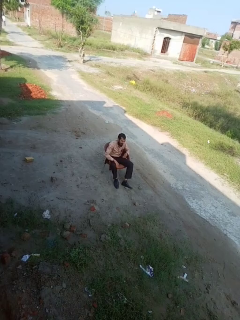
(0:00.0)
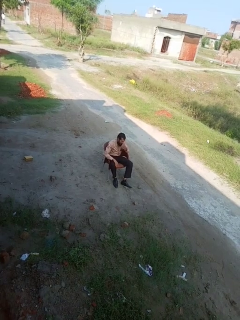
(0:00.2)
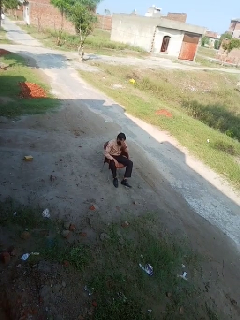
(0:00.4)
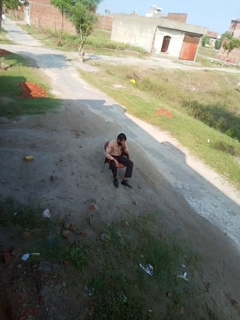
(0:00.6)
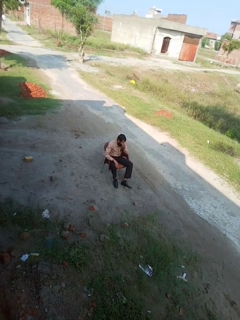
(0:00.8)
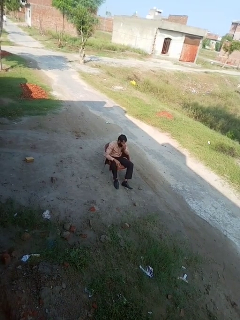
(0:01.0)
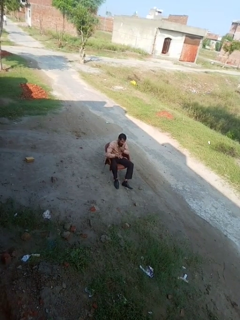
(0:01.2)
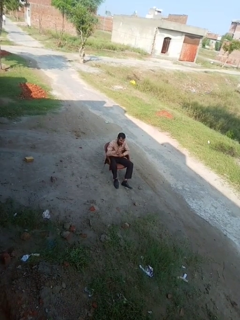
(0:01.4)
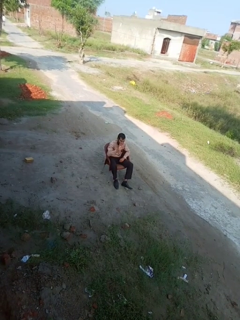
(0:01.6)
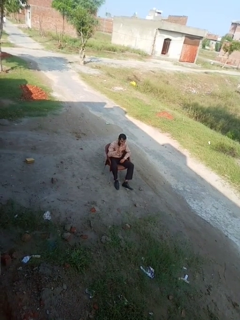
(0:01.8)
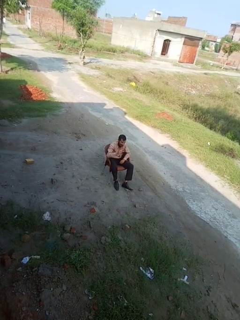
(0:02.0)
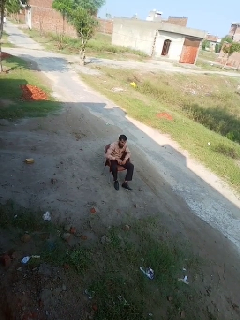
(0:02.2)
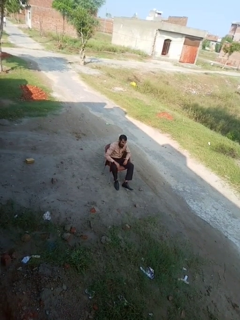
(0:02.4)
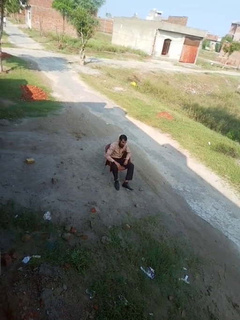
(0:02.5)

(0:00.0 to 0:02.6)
person gestures number five

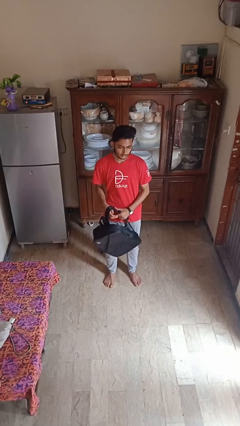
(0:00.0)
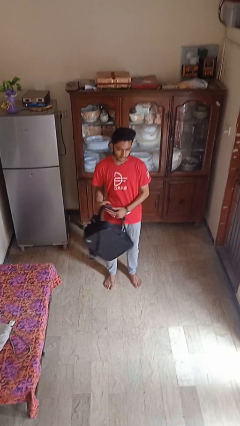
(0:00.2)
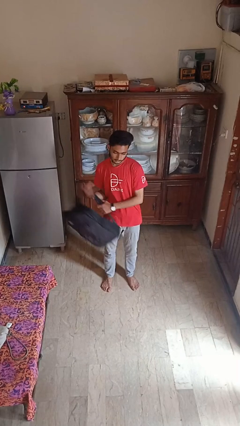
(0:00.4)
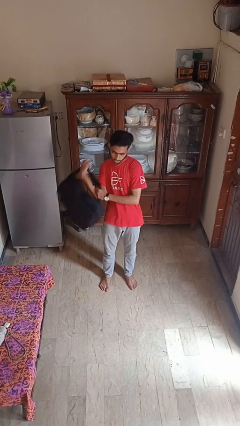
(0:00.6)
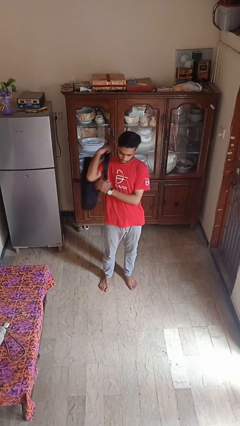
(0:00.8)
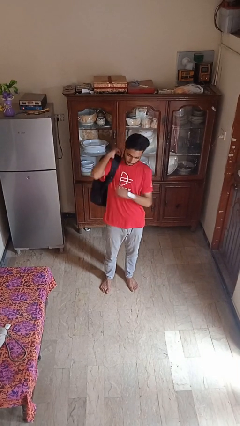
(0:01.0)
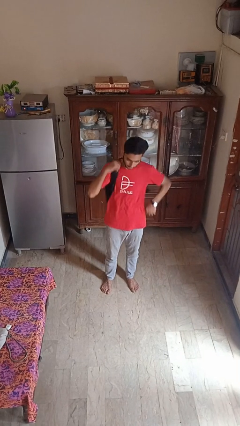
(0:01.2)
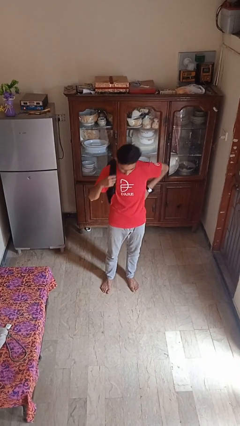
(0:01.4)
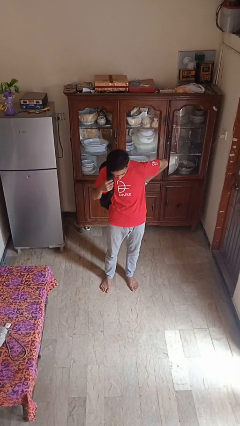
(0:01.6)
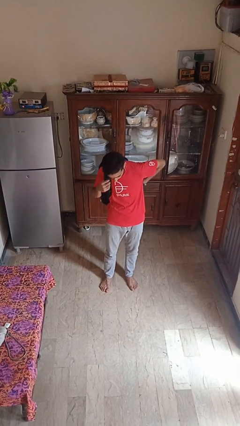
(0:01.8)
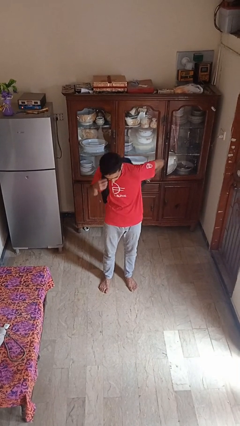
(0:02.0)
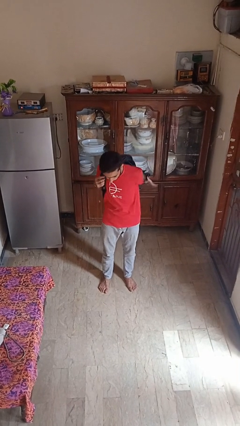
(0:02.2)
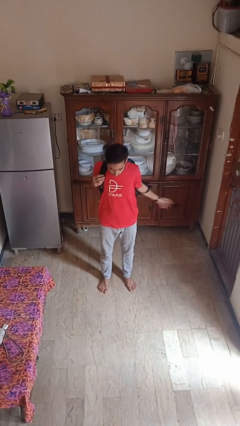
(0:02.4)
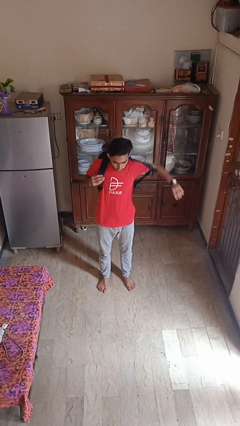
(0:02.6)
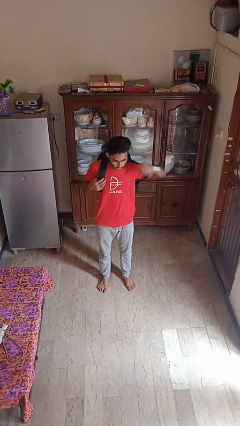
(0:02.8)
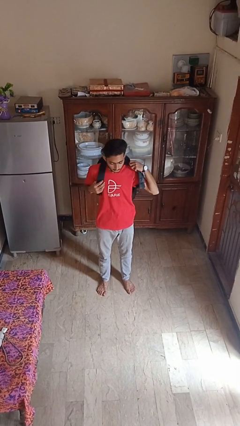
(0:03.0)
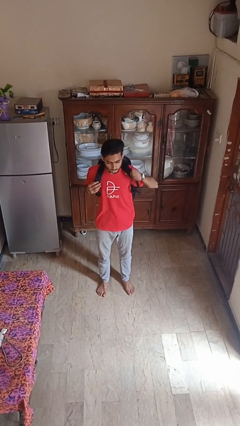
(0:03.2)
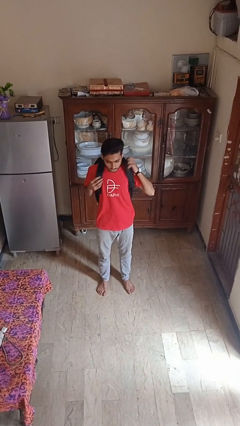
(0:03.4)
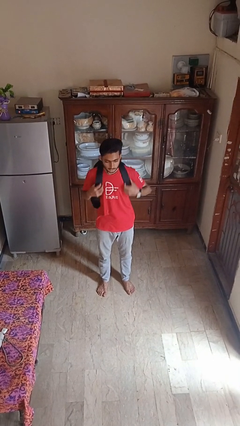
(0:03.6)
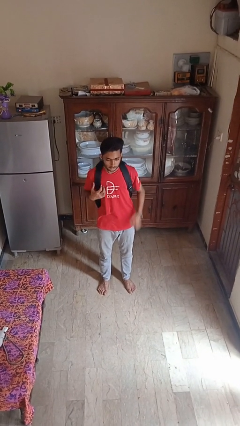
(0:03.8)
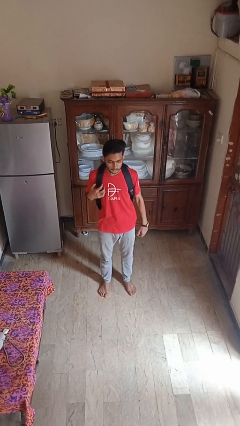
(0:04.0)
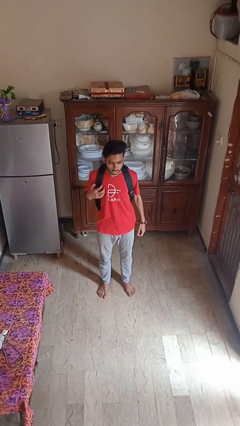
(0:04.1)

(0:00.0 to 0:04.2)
person puts on backpack

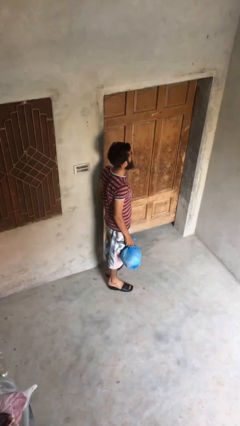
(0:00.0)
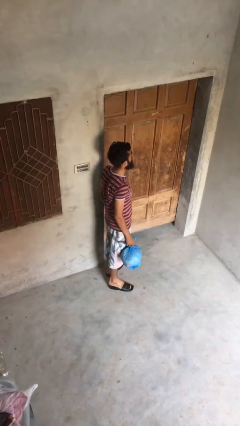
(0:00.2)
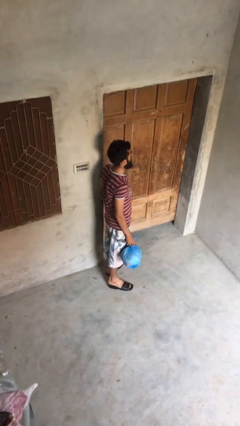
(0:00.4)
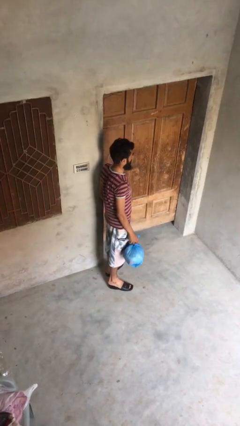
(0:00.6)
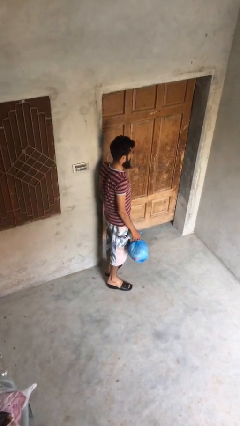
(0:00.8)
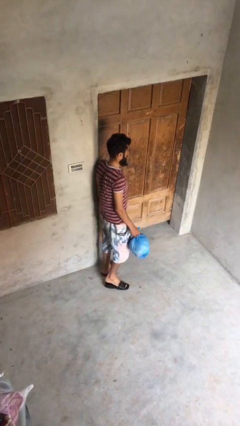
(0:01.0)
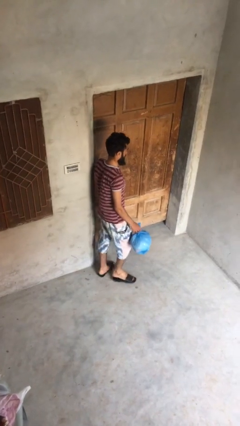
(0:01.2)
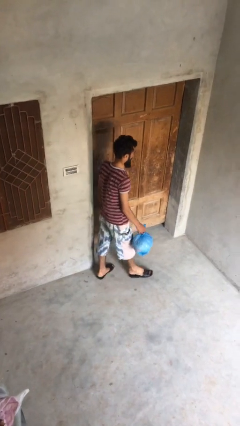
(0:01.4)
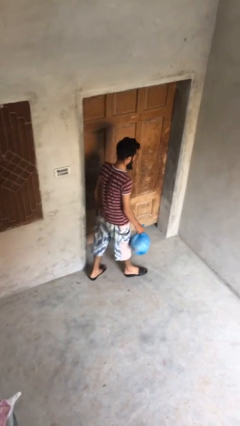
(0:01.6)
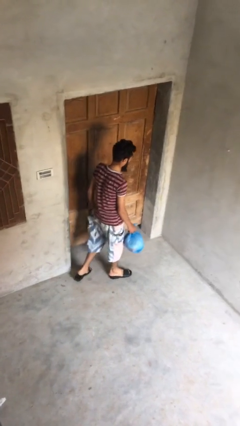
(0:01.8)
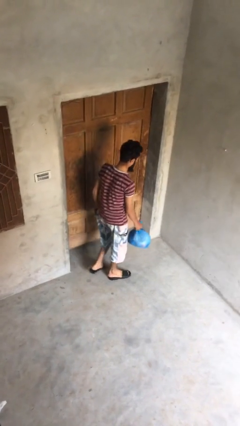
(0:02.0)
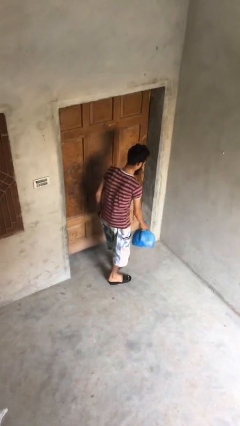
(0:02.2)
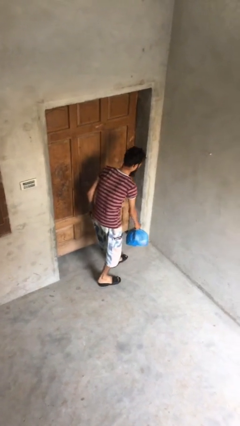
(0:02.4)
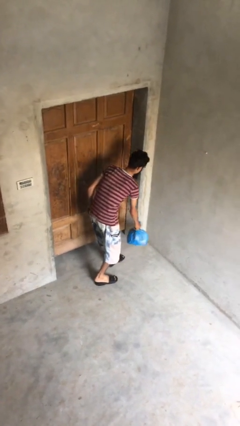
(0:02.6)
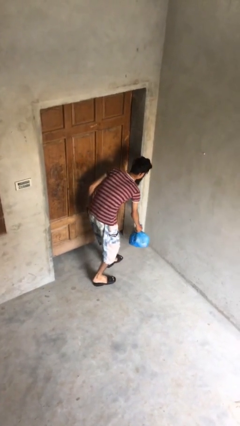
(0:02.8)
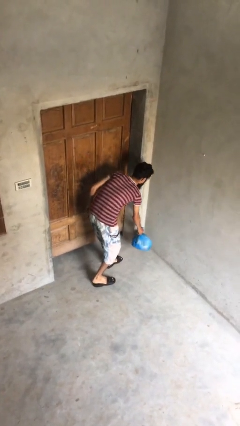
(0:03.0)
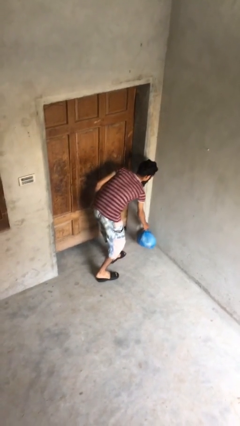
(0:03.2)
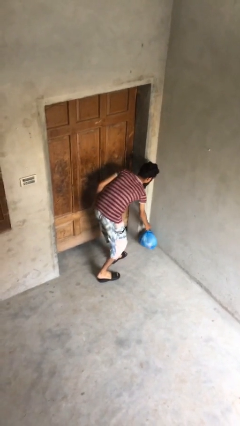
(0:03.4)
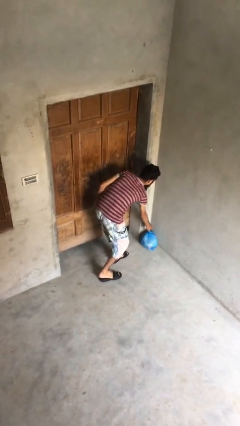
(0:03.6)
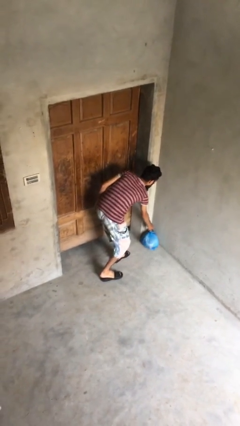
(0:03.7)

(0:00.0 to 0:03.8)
person puts down object on floor

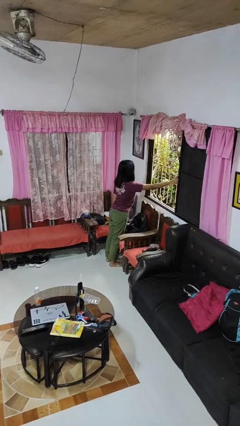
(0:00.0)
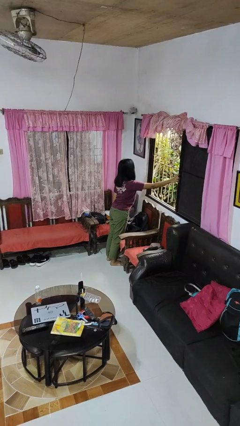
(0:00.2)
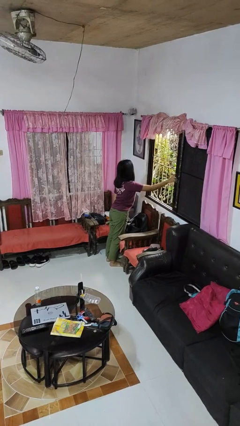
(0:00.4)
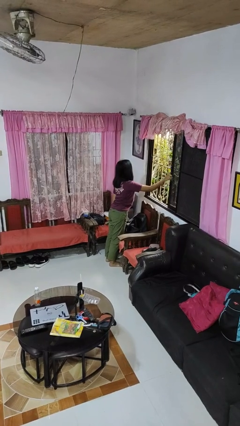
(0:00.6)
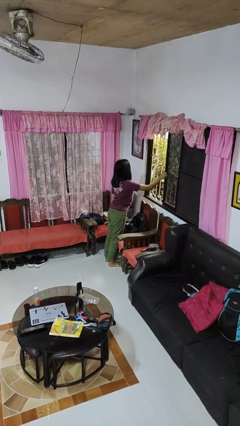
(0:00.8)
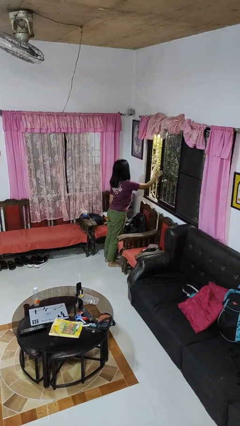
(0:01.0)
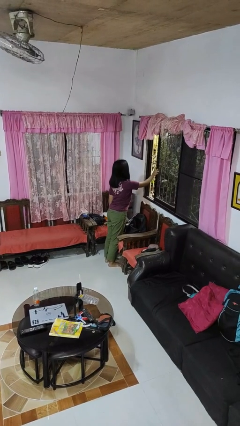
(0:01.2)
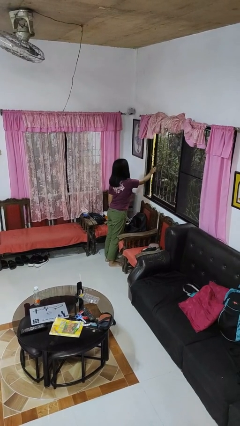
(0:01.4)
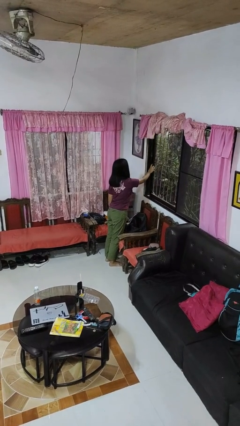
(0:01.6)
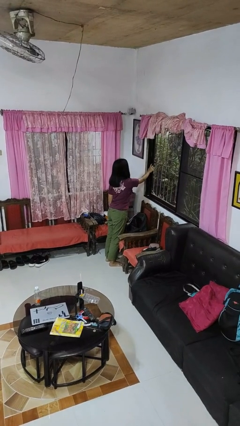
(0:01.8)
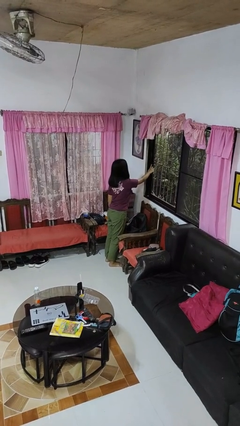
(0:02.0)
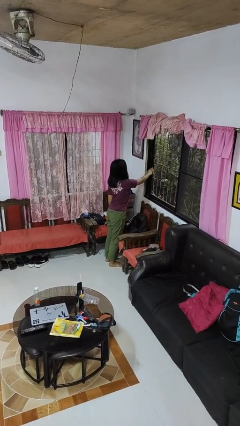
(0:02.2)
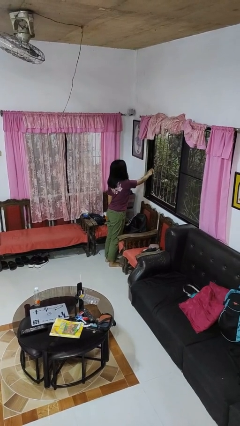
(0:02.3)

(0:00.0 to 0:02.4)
person closes home window

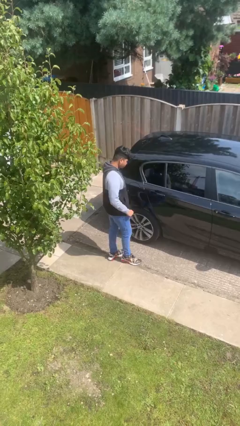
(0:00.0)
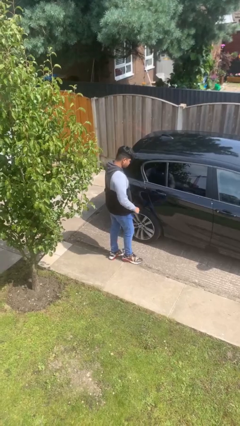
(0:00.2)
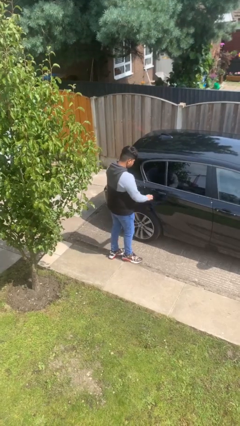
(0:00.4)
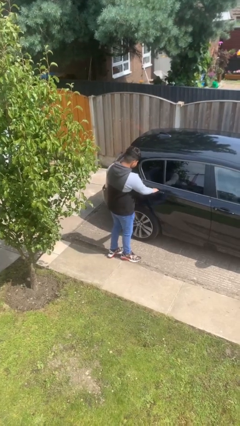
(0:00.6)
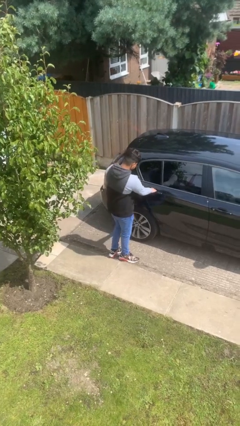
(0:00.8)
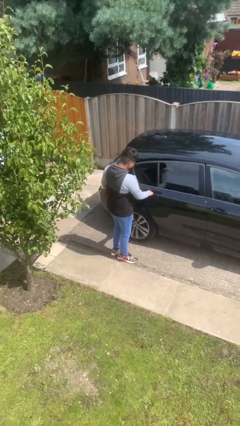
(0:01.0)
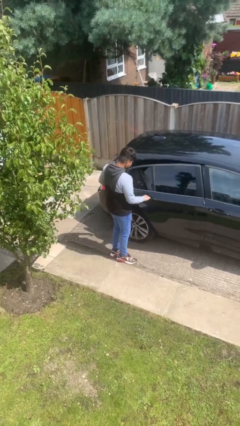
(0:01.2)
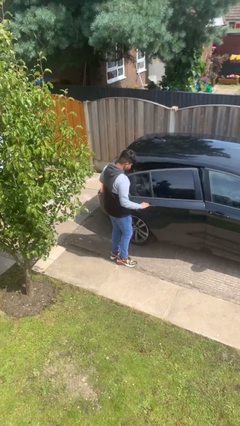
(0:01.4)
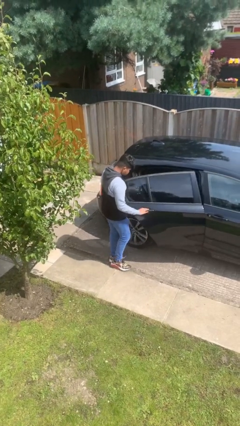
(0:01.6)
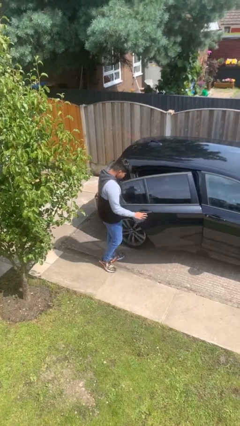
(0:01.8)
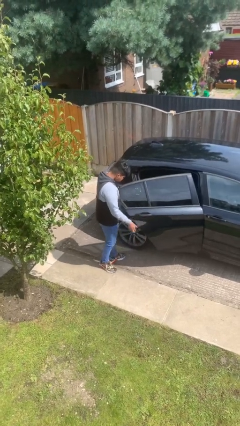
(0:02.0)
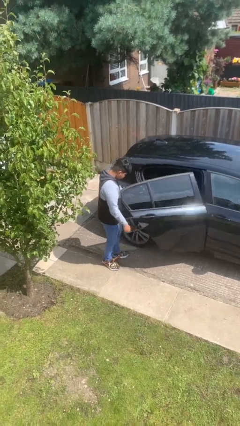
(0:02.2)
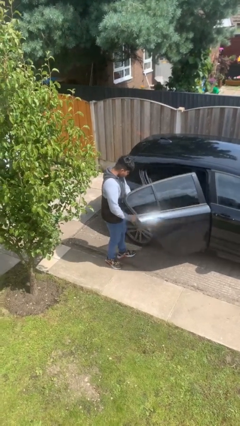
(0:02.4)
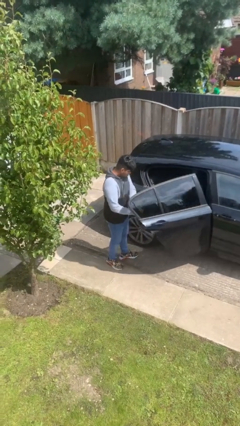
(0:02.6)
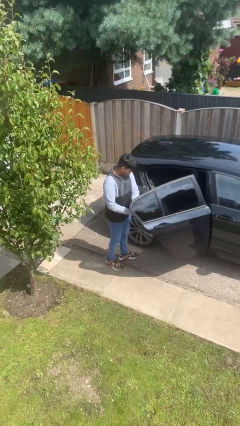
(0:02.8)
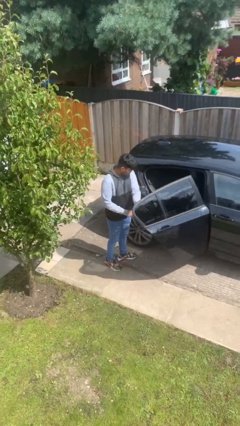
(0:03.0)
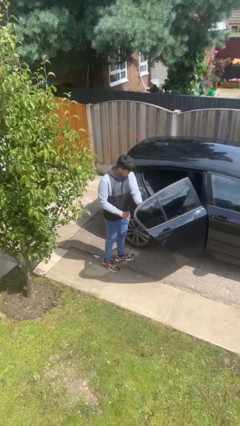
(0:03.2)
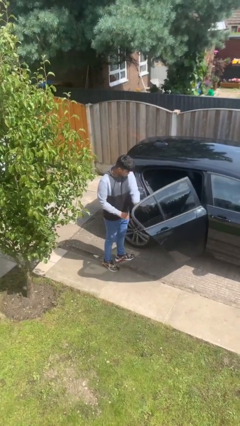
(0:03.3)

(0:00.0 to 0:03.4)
person opens car door

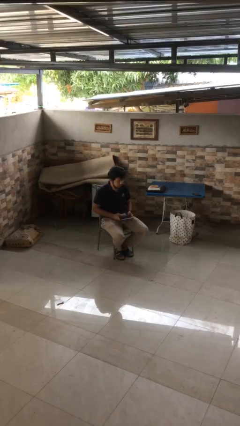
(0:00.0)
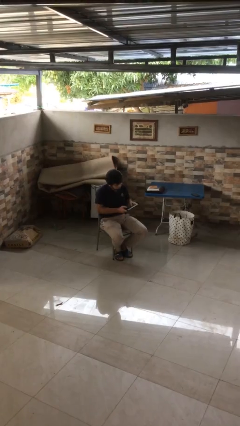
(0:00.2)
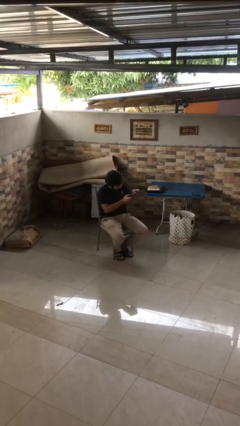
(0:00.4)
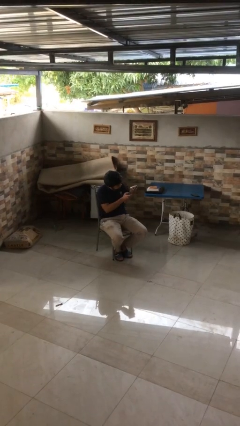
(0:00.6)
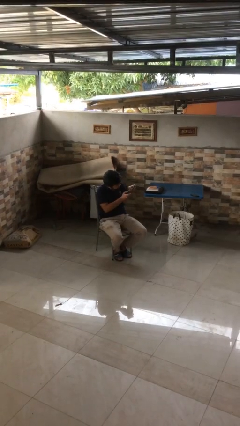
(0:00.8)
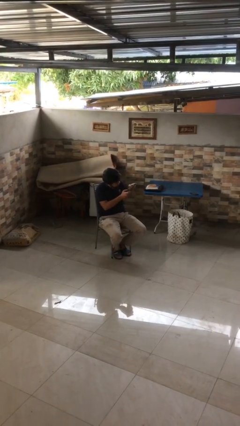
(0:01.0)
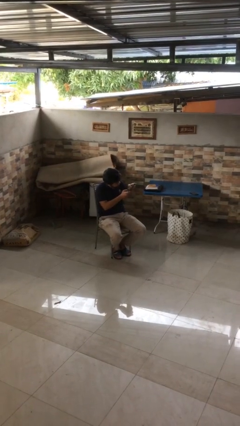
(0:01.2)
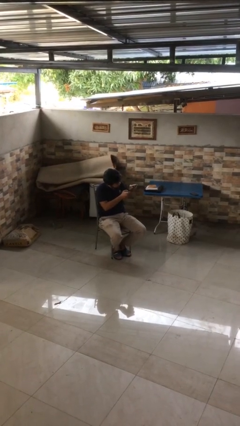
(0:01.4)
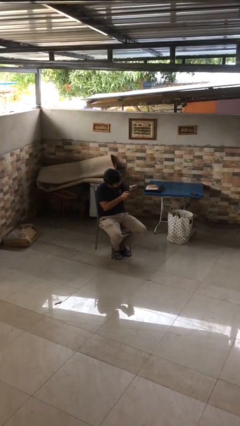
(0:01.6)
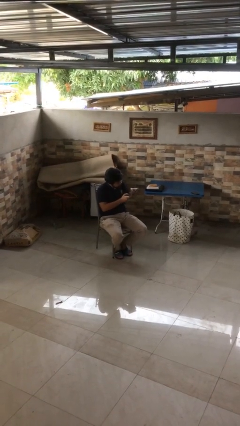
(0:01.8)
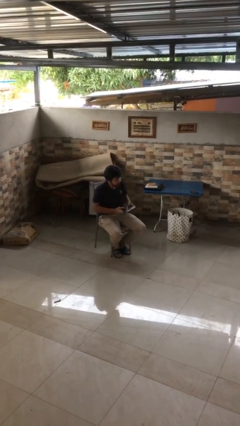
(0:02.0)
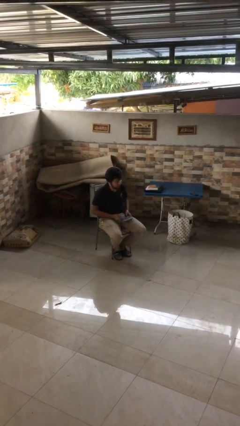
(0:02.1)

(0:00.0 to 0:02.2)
person interacts with handheld game
